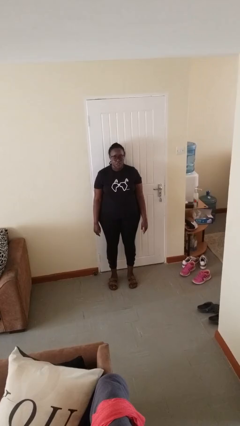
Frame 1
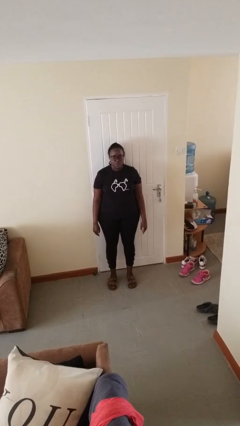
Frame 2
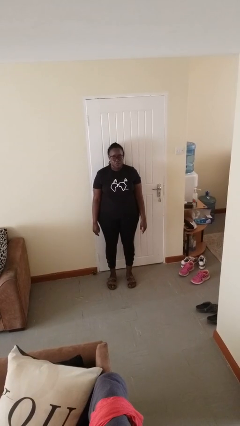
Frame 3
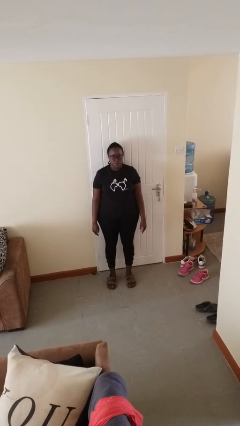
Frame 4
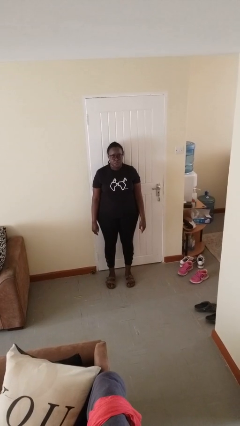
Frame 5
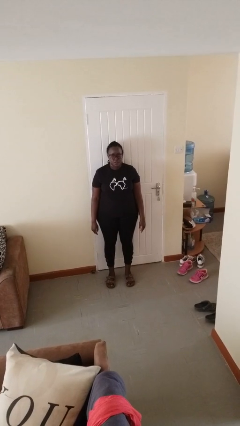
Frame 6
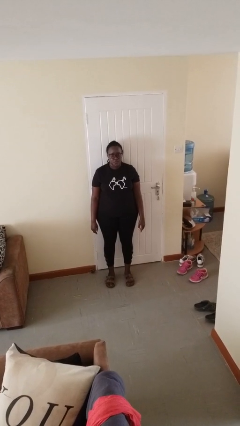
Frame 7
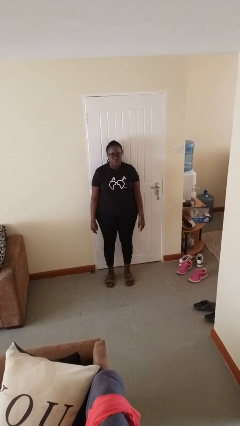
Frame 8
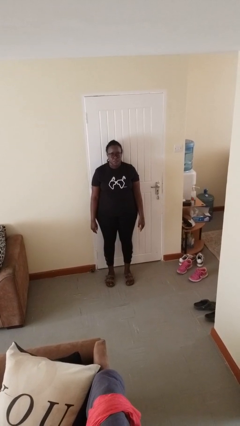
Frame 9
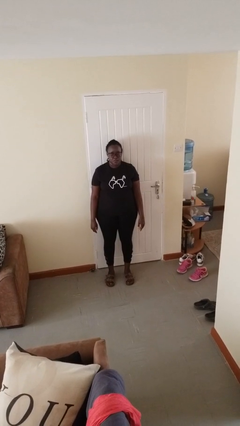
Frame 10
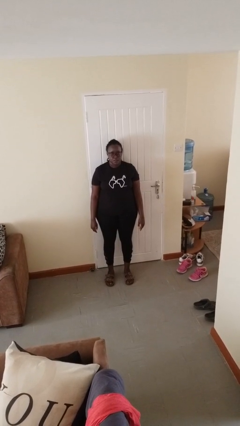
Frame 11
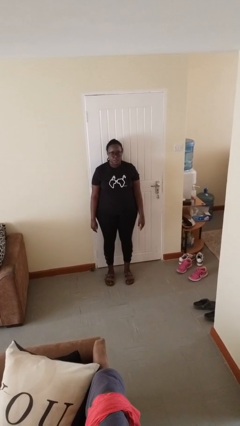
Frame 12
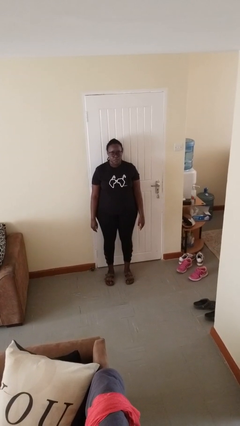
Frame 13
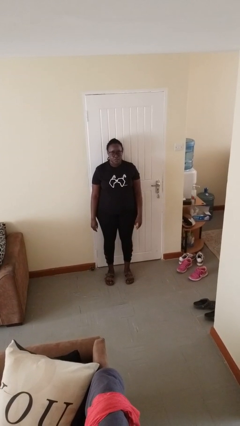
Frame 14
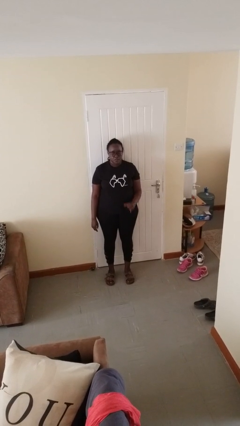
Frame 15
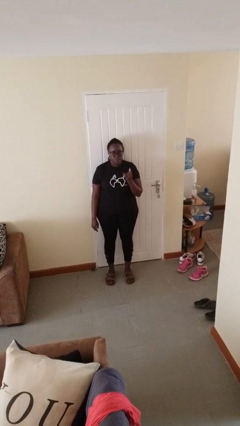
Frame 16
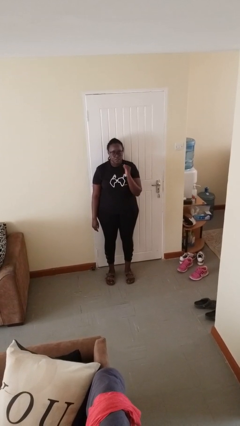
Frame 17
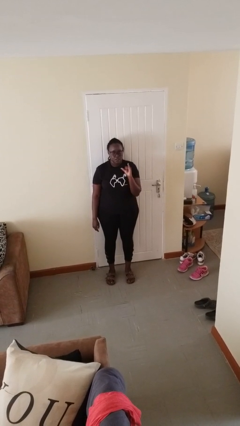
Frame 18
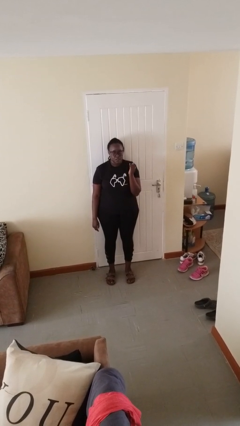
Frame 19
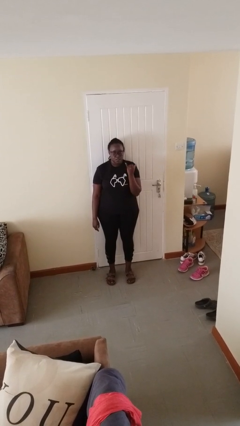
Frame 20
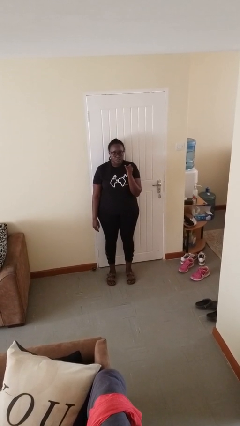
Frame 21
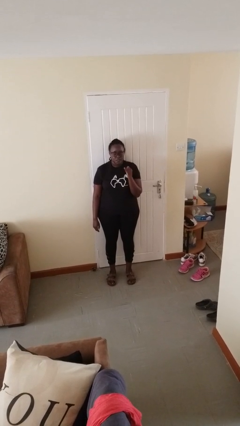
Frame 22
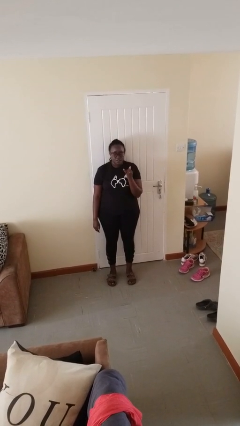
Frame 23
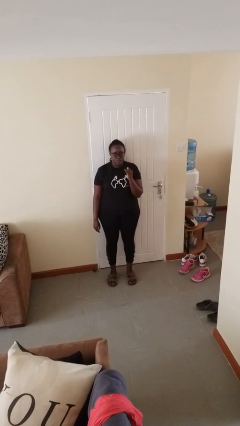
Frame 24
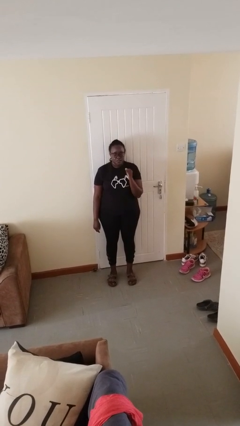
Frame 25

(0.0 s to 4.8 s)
person gestures hang loose

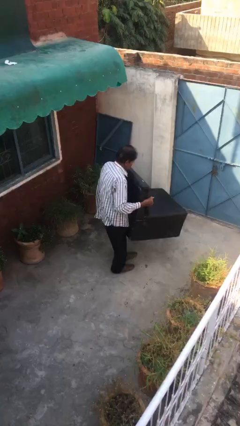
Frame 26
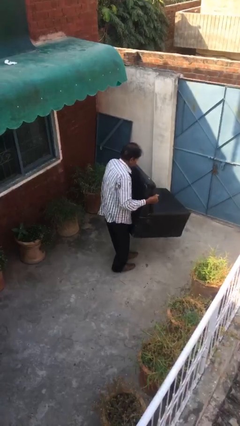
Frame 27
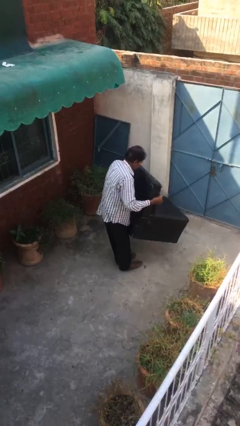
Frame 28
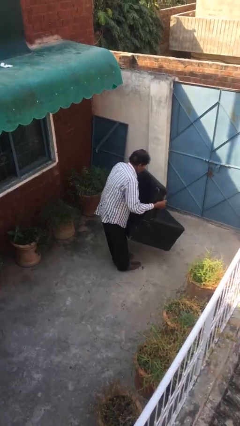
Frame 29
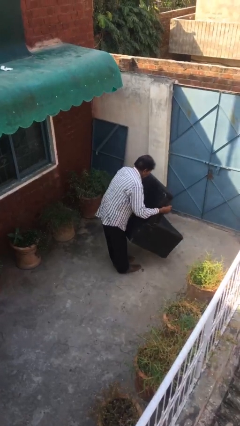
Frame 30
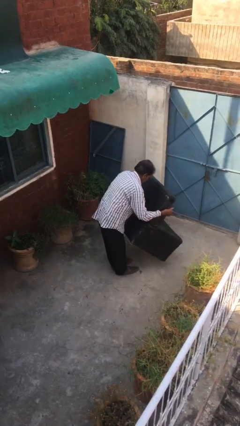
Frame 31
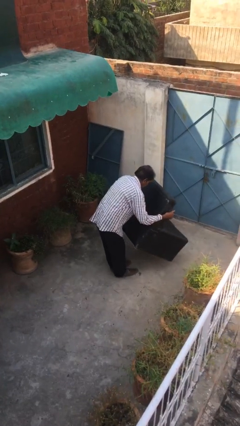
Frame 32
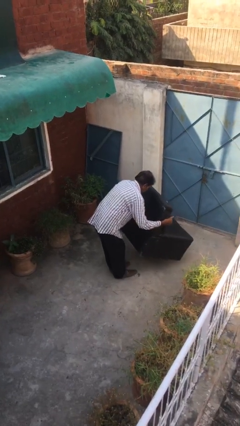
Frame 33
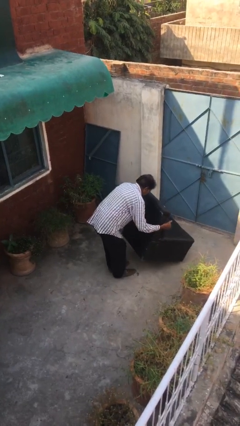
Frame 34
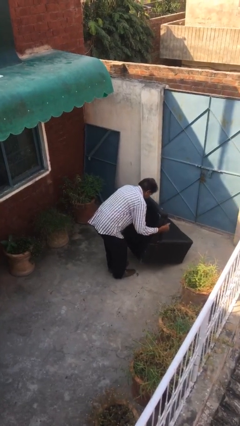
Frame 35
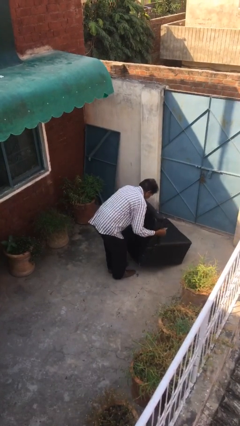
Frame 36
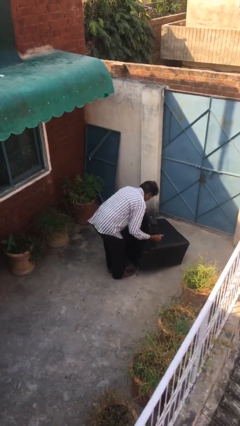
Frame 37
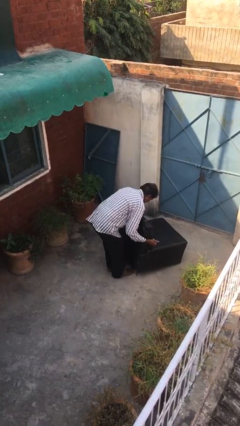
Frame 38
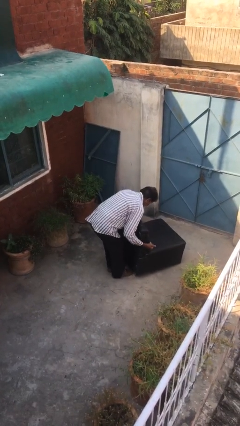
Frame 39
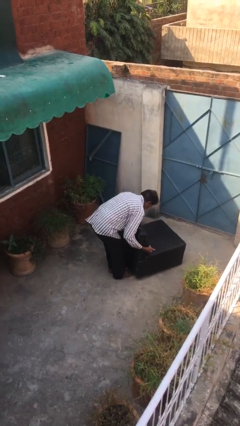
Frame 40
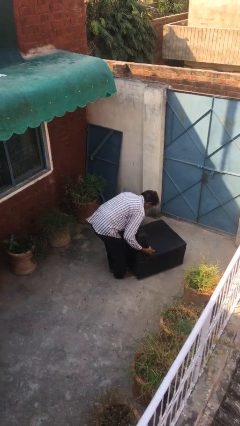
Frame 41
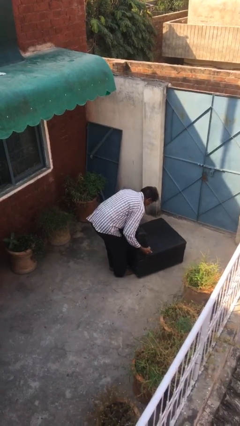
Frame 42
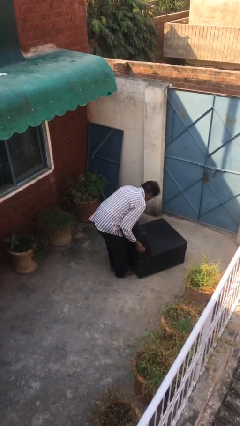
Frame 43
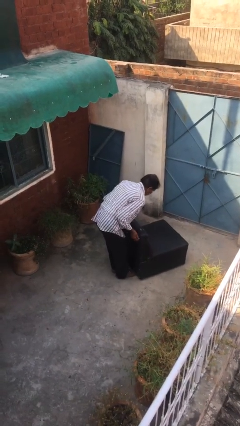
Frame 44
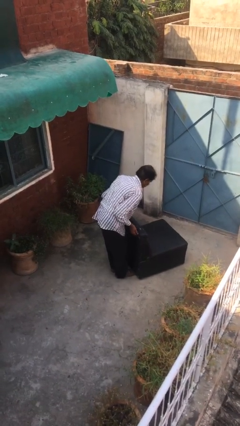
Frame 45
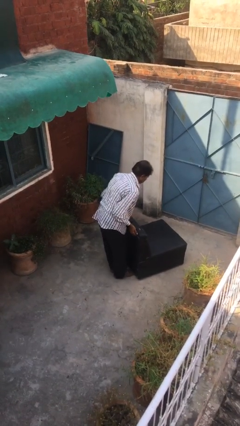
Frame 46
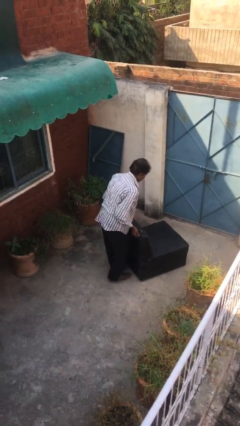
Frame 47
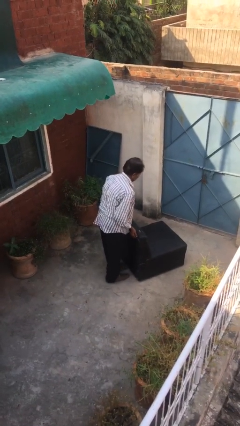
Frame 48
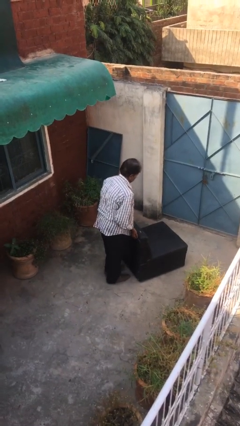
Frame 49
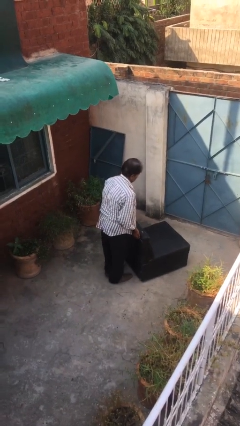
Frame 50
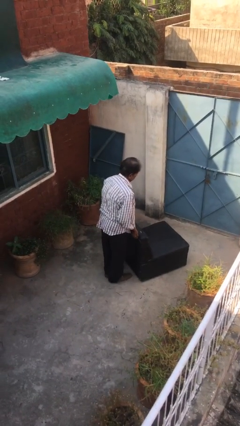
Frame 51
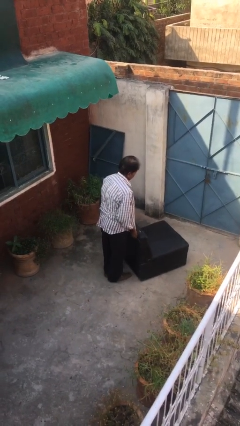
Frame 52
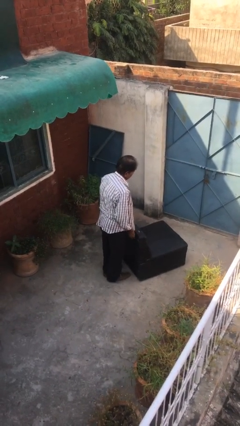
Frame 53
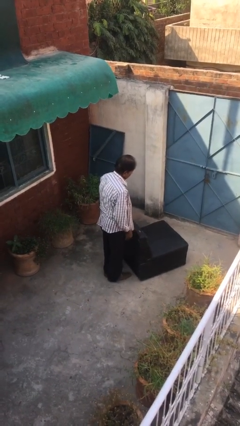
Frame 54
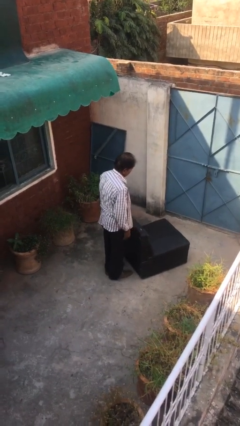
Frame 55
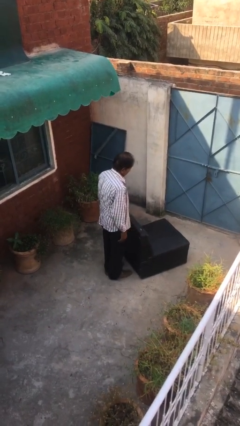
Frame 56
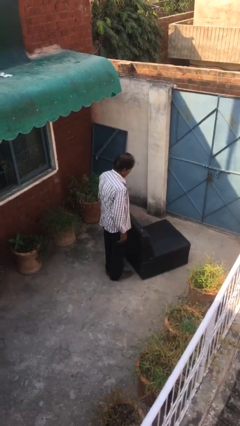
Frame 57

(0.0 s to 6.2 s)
person puts down object on floor

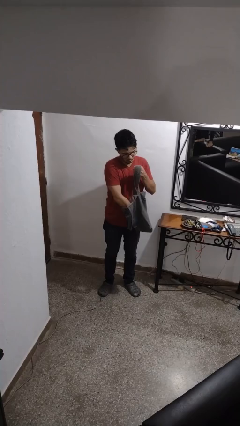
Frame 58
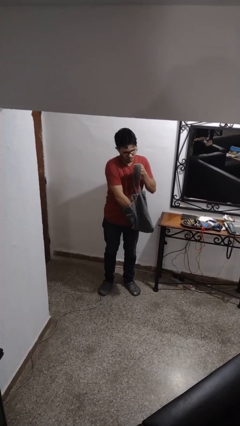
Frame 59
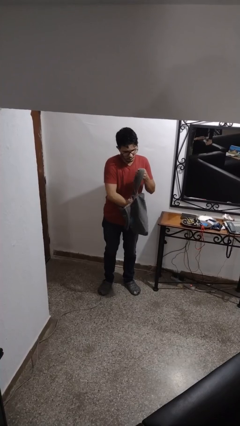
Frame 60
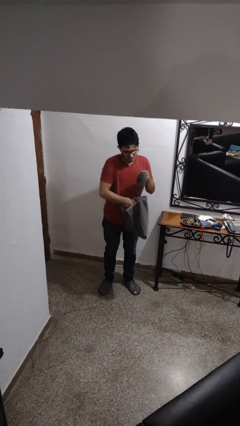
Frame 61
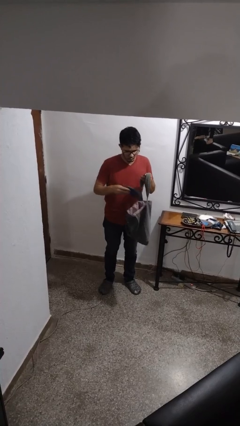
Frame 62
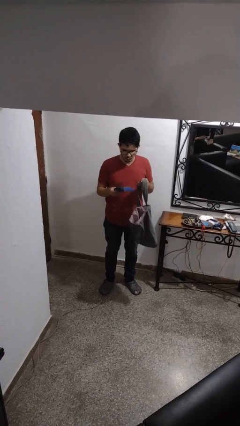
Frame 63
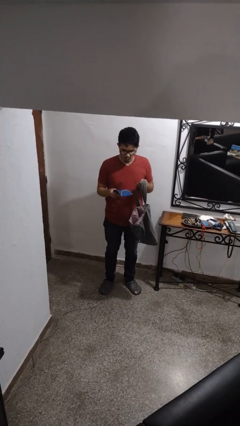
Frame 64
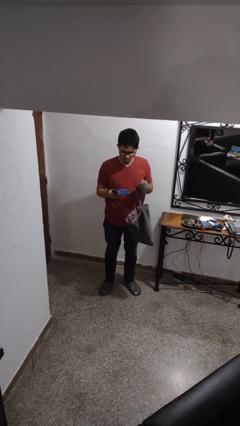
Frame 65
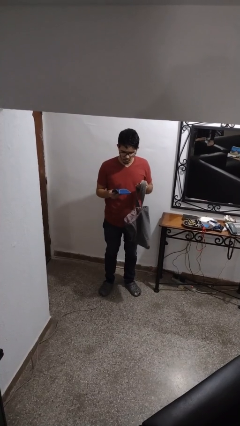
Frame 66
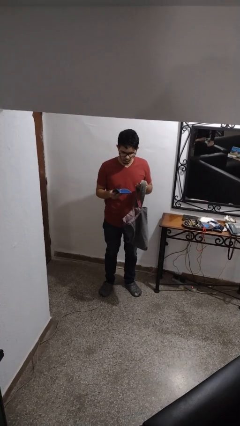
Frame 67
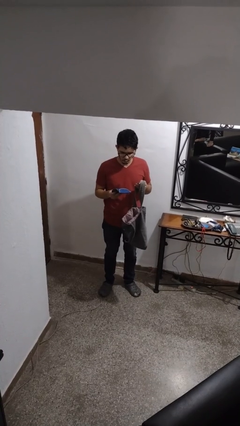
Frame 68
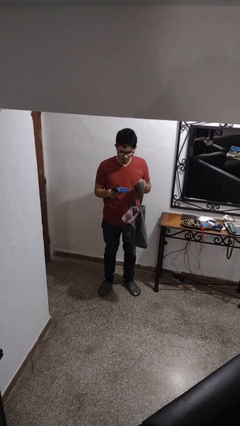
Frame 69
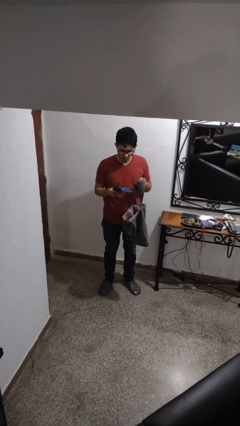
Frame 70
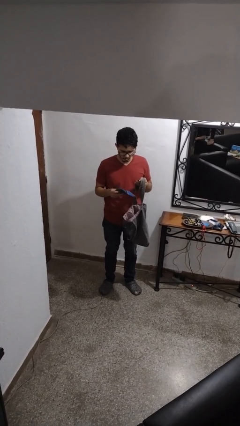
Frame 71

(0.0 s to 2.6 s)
person takes object from purse

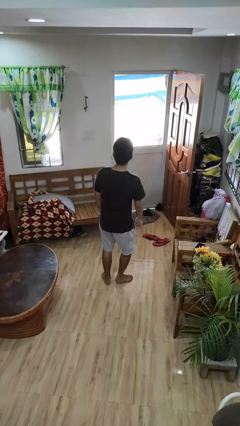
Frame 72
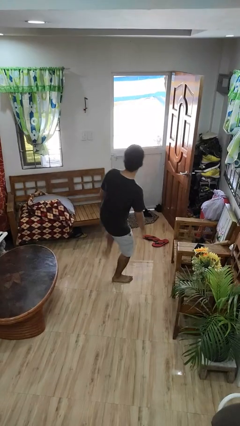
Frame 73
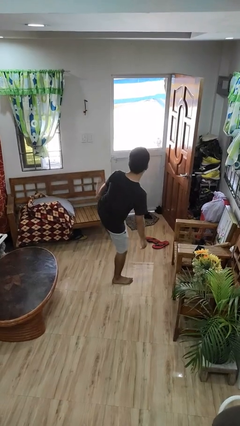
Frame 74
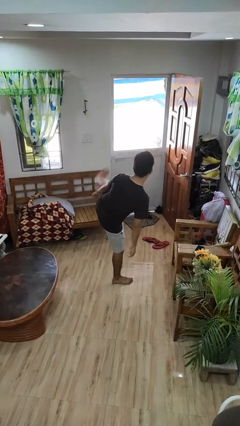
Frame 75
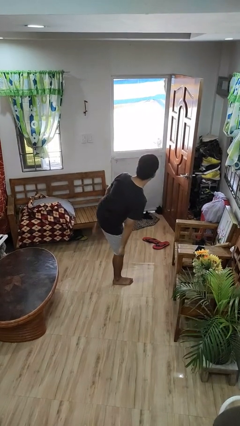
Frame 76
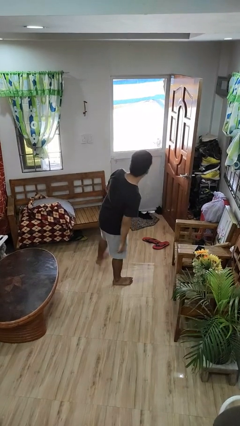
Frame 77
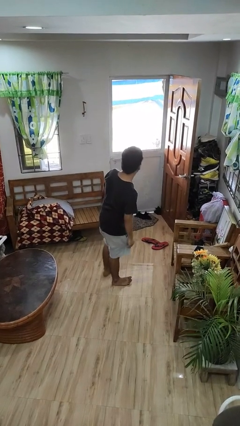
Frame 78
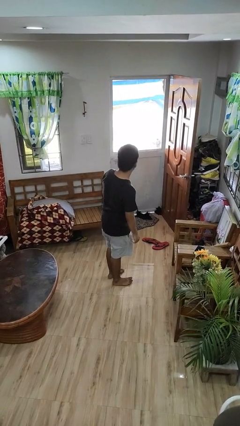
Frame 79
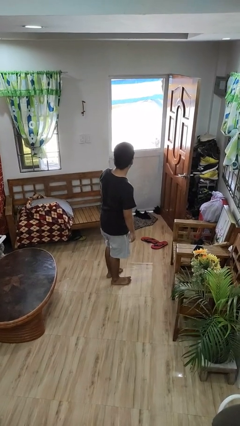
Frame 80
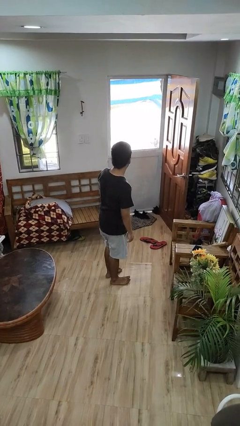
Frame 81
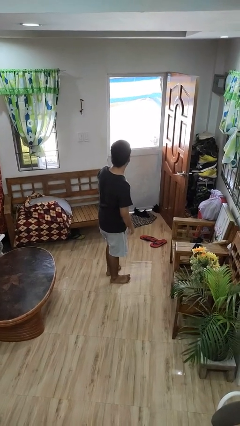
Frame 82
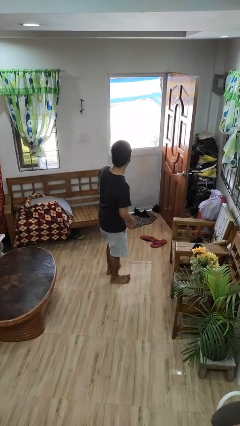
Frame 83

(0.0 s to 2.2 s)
person karate kicks

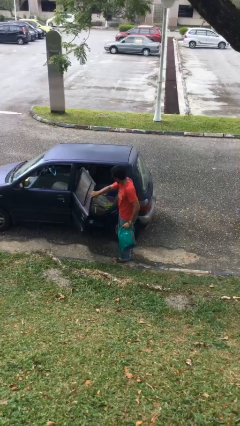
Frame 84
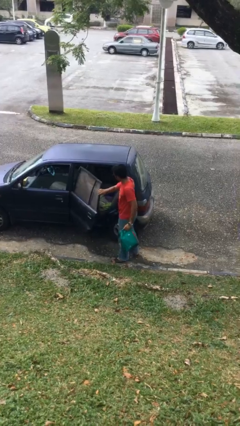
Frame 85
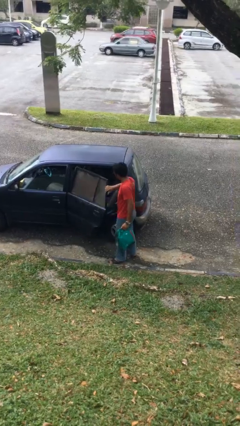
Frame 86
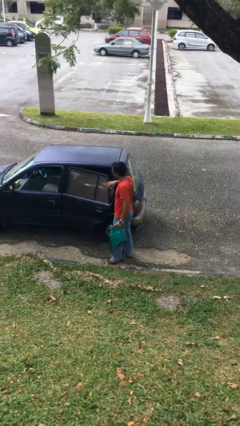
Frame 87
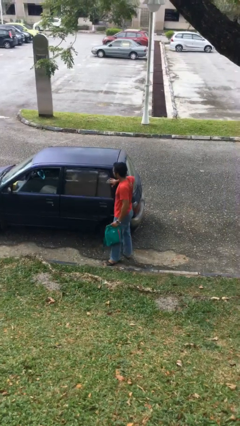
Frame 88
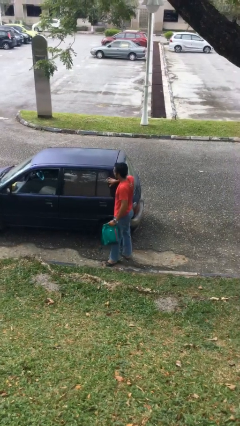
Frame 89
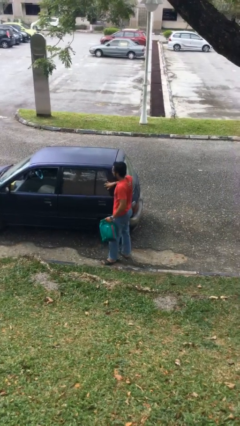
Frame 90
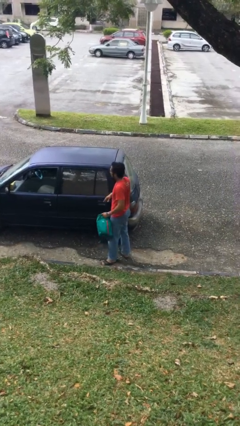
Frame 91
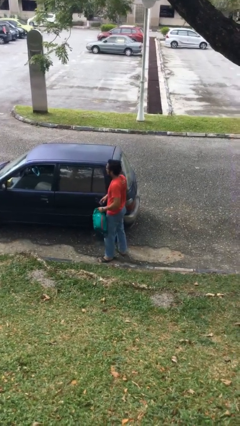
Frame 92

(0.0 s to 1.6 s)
person closes car door
